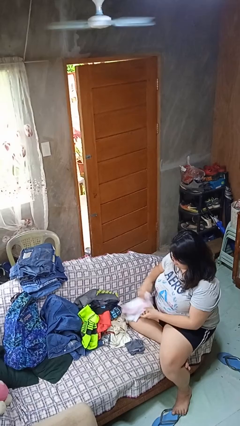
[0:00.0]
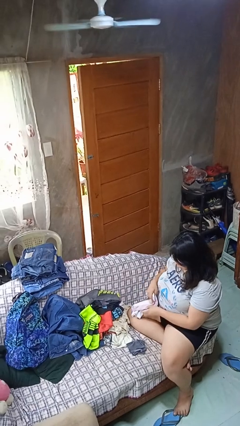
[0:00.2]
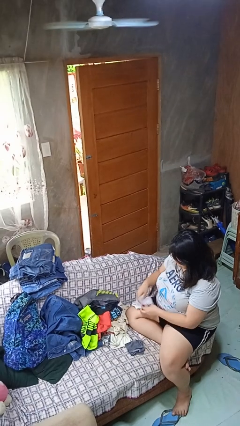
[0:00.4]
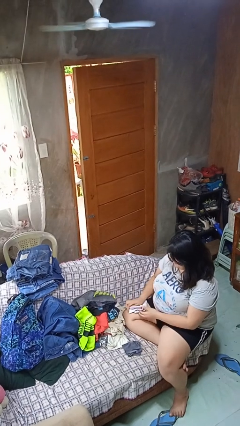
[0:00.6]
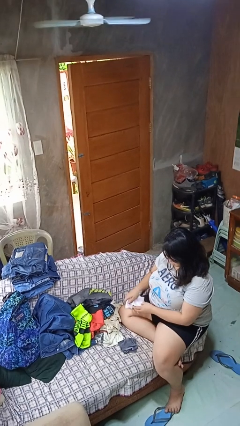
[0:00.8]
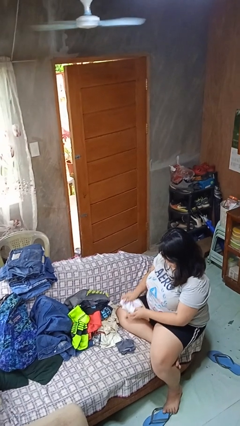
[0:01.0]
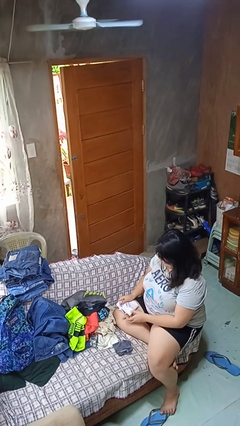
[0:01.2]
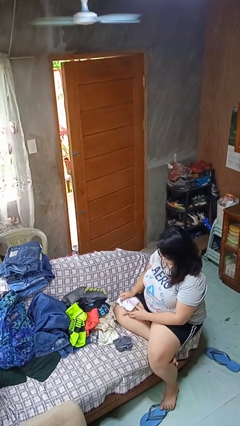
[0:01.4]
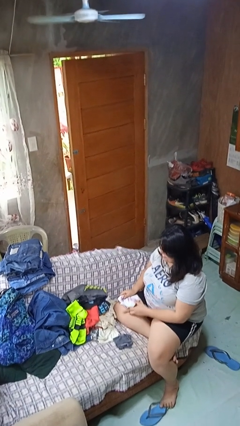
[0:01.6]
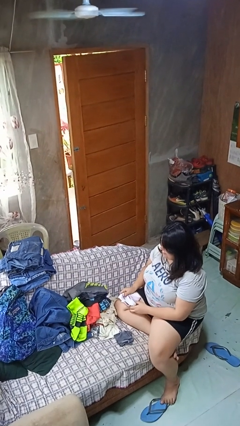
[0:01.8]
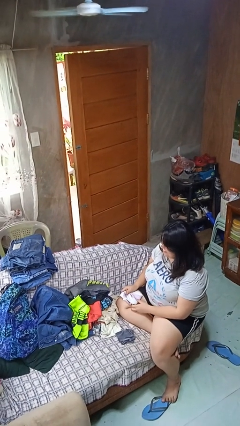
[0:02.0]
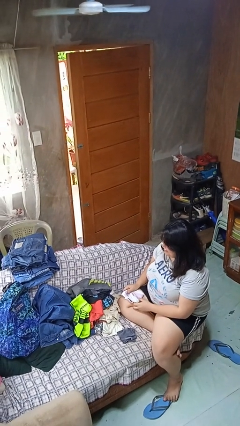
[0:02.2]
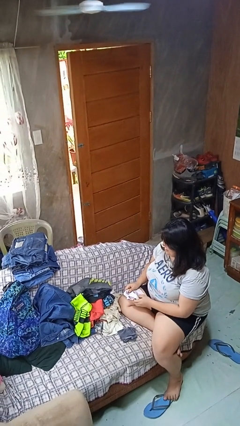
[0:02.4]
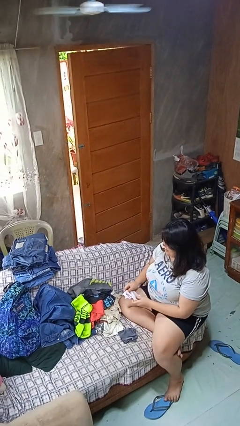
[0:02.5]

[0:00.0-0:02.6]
person folds socks

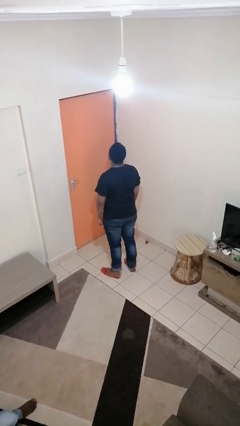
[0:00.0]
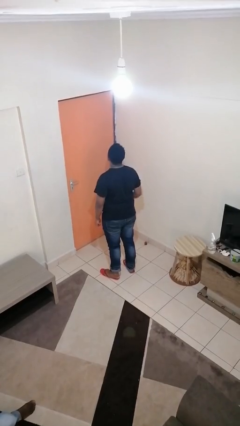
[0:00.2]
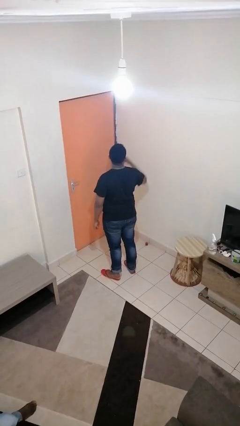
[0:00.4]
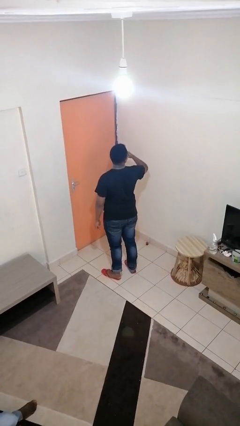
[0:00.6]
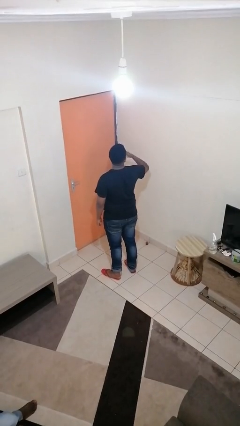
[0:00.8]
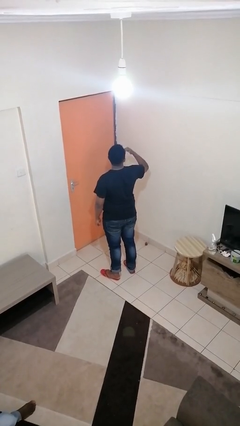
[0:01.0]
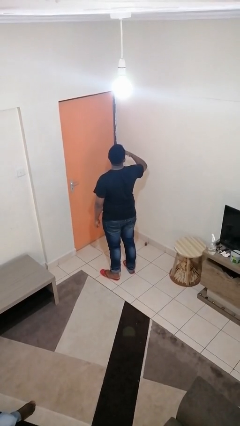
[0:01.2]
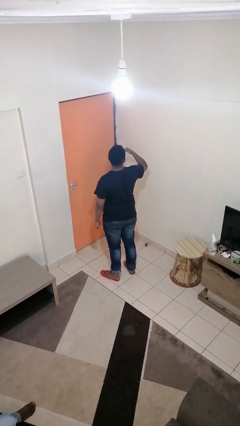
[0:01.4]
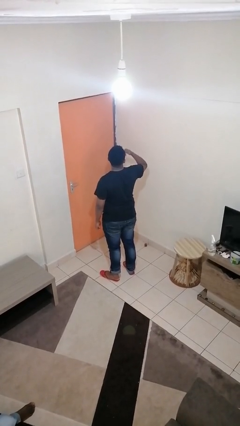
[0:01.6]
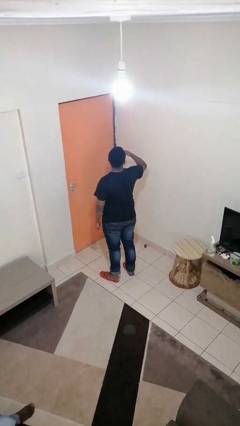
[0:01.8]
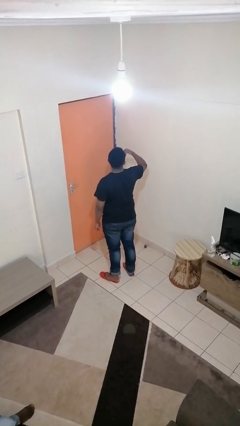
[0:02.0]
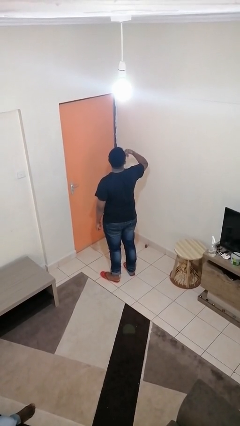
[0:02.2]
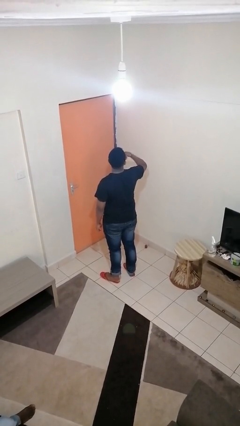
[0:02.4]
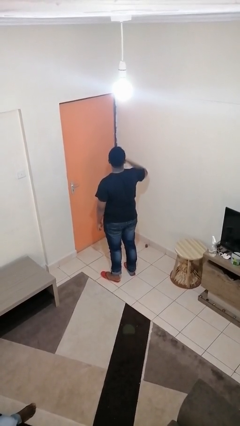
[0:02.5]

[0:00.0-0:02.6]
person licks fingers

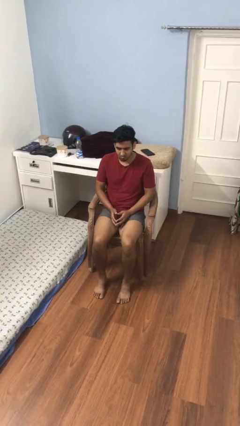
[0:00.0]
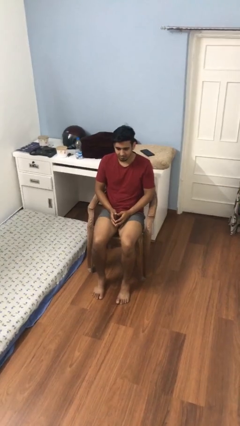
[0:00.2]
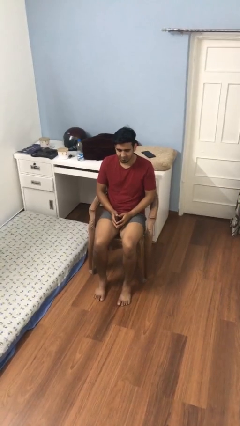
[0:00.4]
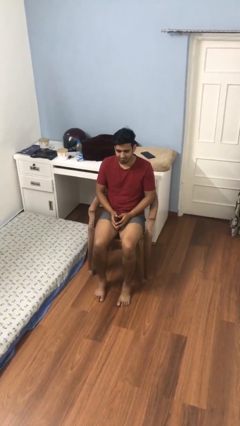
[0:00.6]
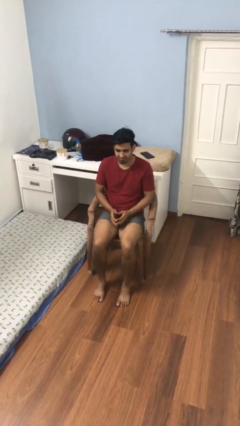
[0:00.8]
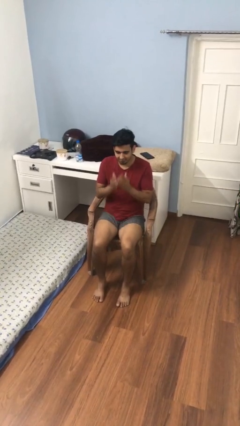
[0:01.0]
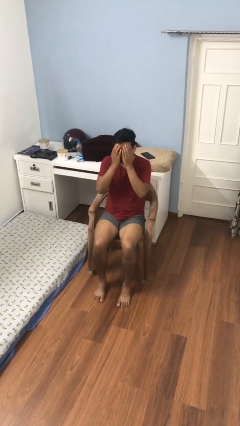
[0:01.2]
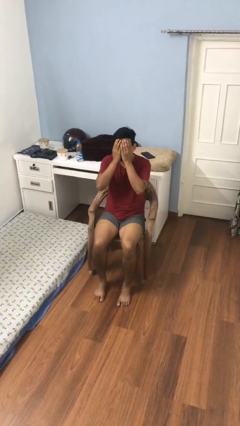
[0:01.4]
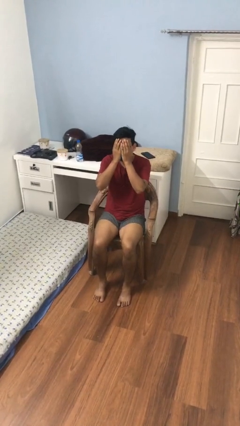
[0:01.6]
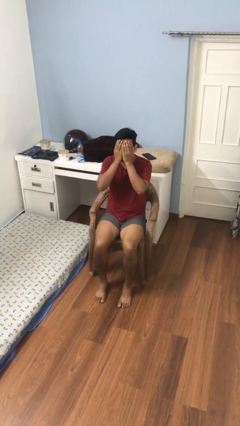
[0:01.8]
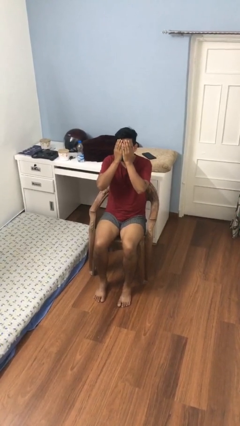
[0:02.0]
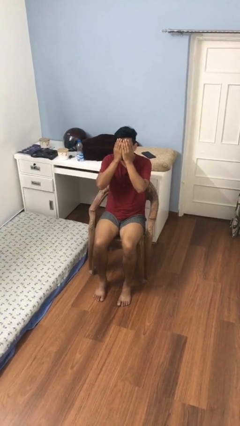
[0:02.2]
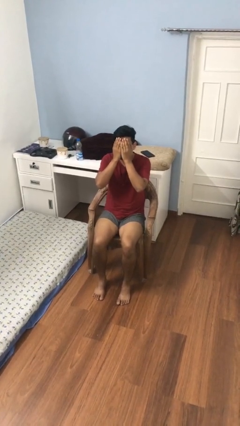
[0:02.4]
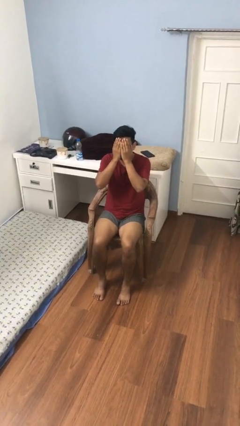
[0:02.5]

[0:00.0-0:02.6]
person covers face with hands

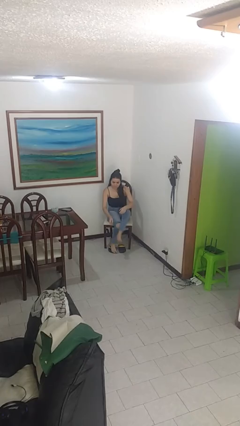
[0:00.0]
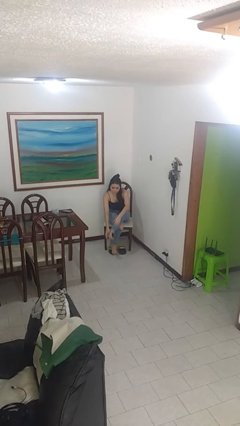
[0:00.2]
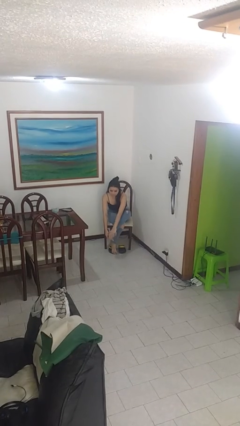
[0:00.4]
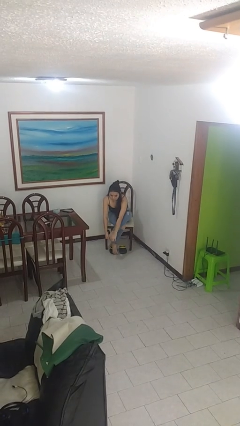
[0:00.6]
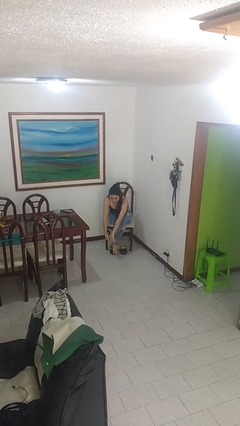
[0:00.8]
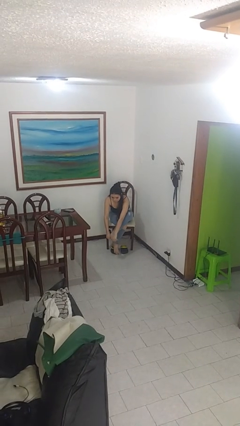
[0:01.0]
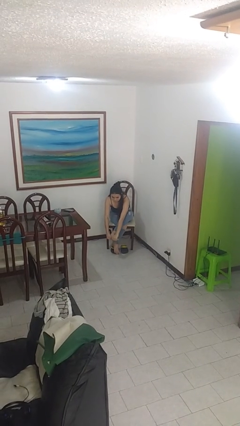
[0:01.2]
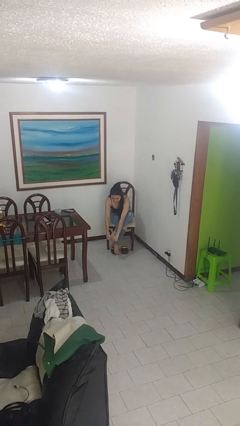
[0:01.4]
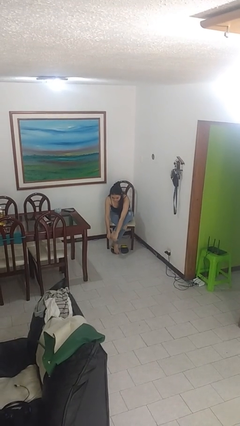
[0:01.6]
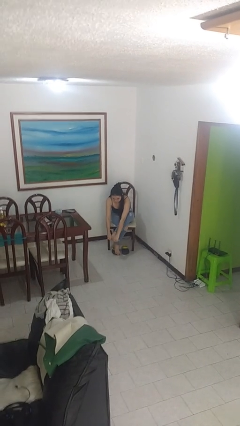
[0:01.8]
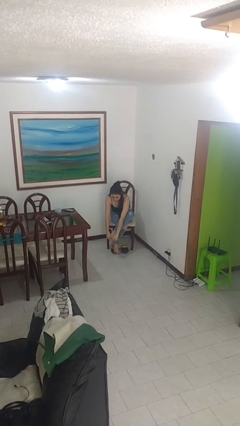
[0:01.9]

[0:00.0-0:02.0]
person rubs foot

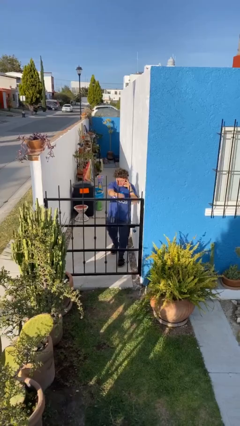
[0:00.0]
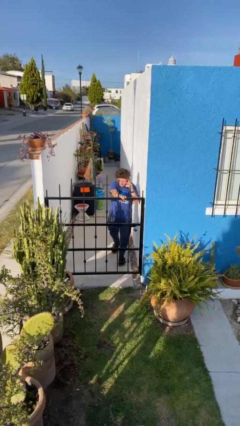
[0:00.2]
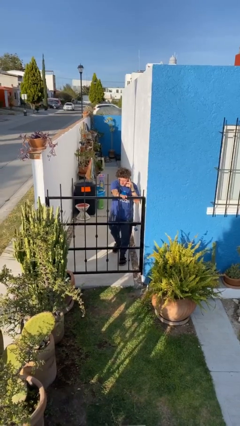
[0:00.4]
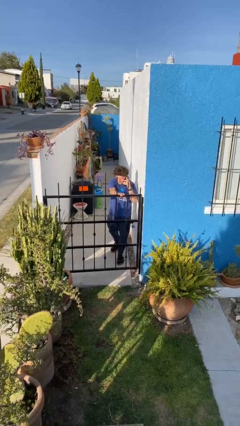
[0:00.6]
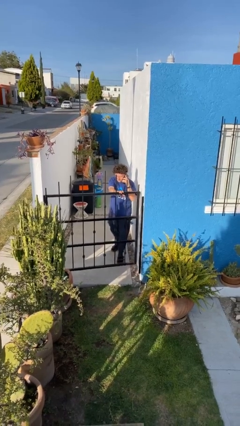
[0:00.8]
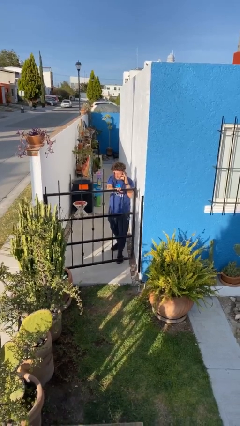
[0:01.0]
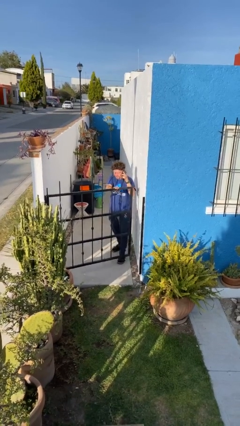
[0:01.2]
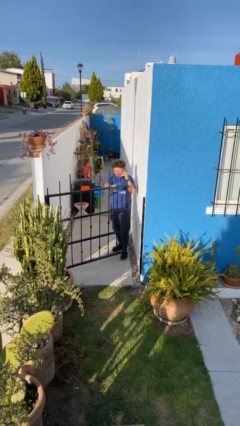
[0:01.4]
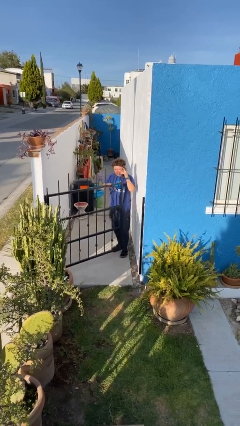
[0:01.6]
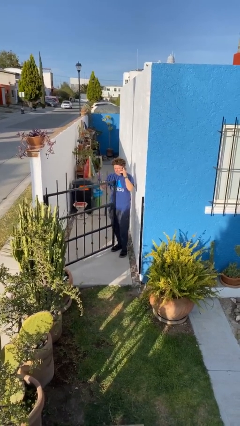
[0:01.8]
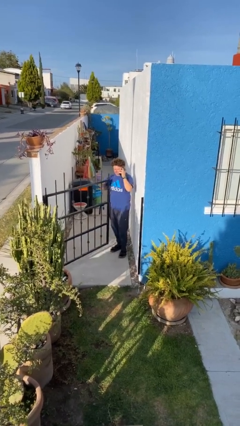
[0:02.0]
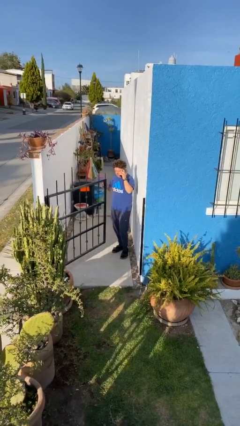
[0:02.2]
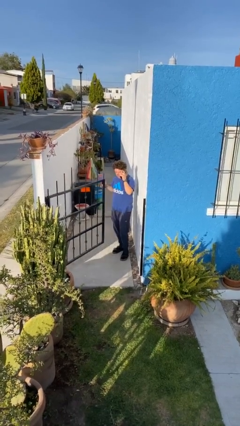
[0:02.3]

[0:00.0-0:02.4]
person opens facility door

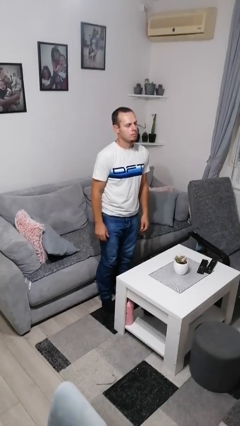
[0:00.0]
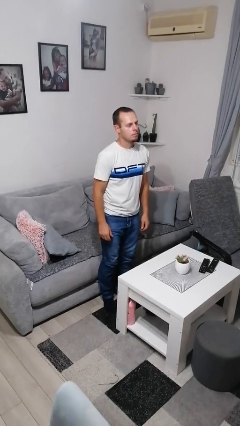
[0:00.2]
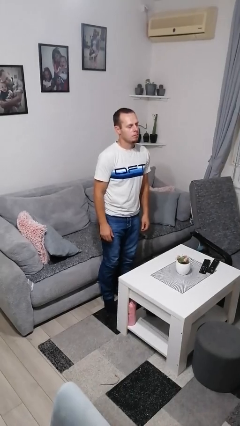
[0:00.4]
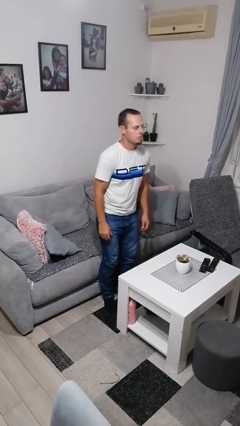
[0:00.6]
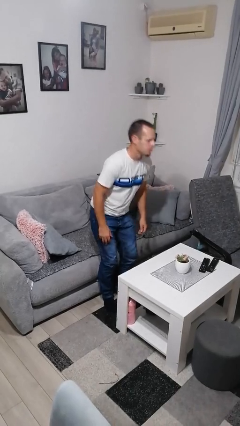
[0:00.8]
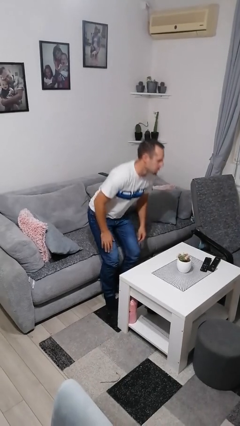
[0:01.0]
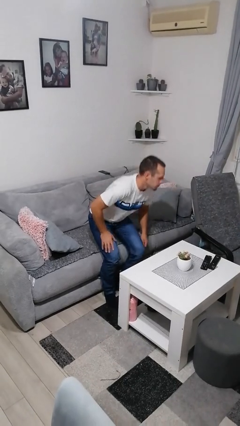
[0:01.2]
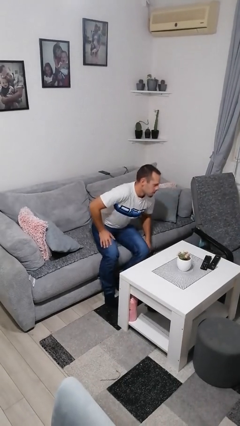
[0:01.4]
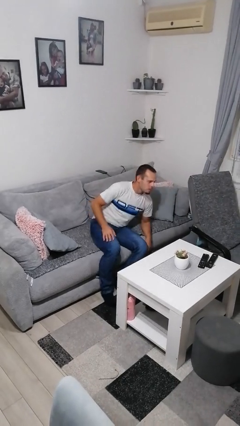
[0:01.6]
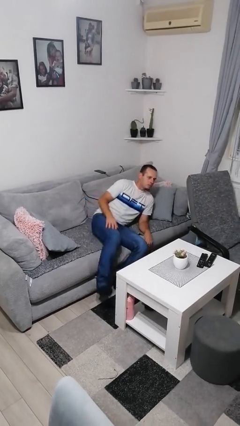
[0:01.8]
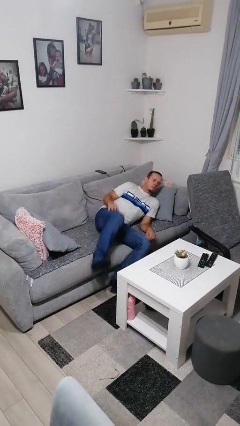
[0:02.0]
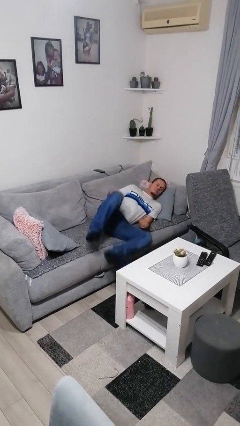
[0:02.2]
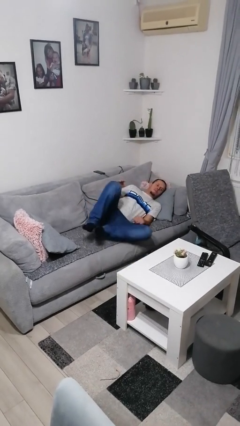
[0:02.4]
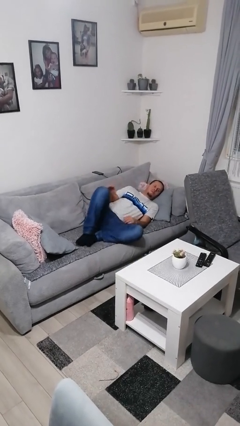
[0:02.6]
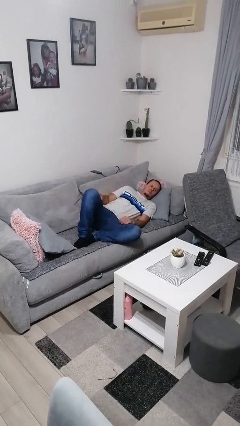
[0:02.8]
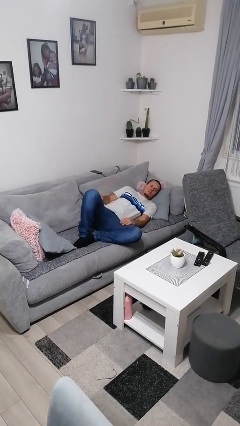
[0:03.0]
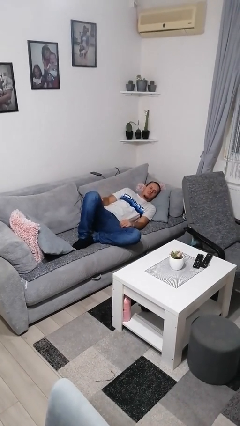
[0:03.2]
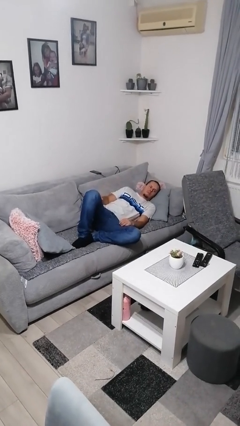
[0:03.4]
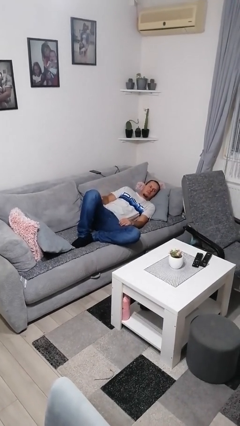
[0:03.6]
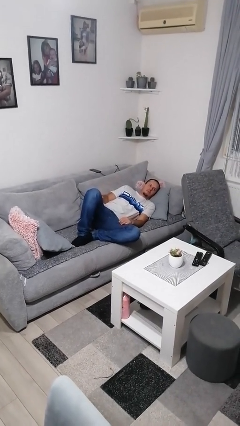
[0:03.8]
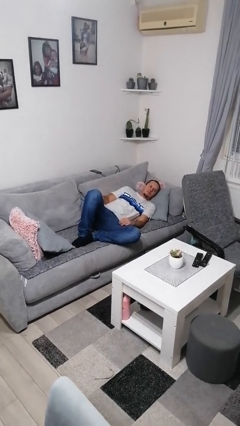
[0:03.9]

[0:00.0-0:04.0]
person lies down on couch

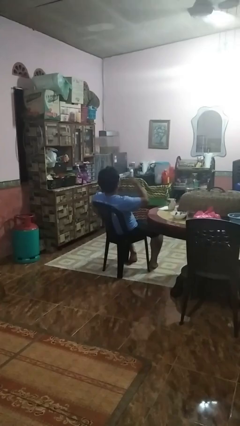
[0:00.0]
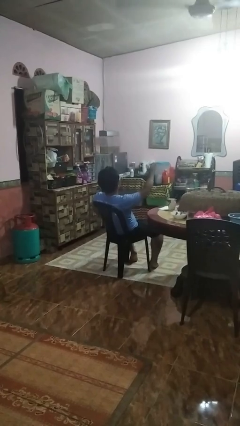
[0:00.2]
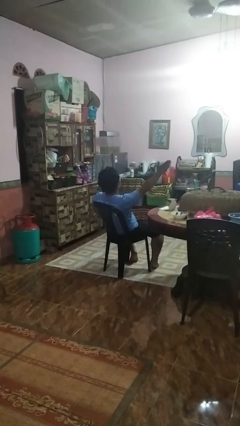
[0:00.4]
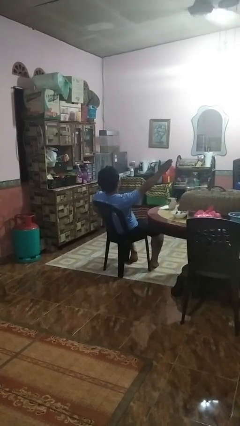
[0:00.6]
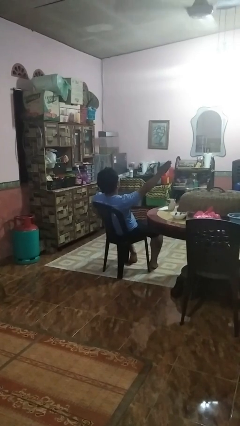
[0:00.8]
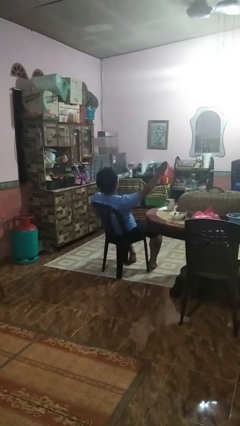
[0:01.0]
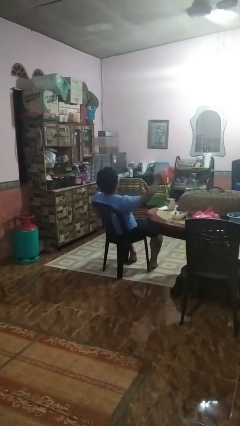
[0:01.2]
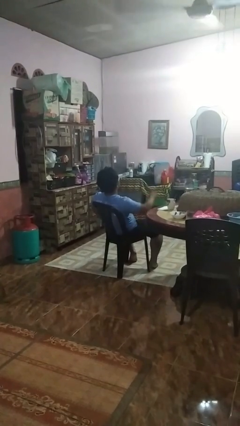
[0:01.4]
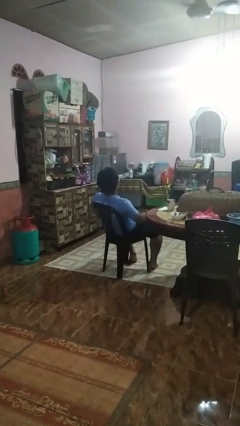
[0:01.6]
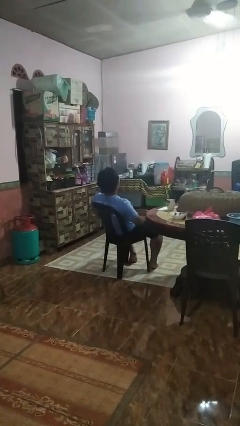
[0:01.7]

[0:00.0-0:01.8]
person gestures blow kiss
